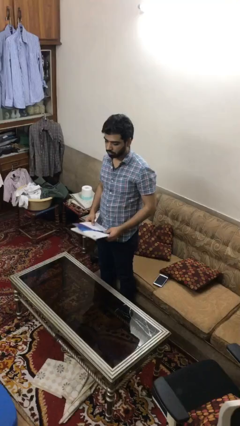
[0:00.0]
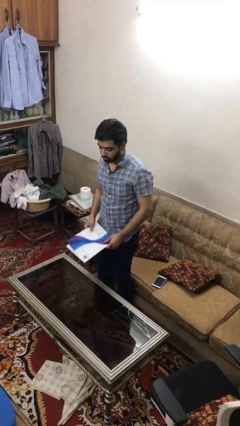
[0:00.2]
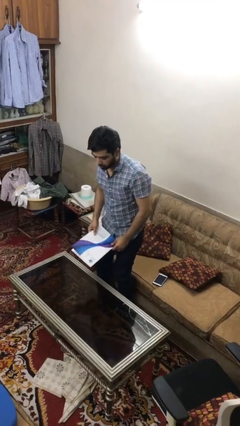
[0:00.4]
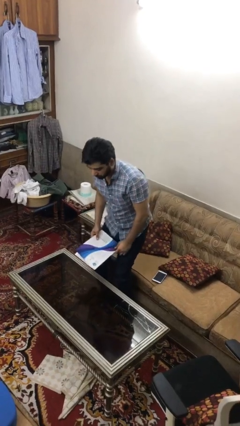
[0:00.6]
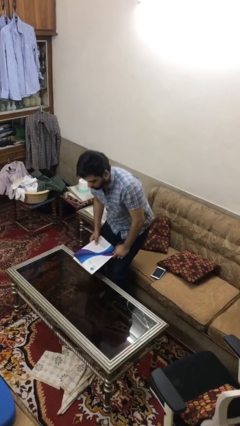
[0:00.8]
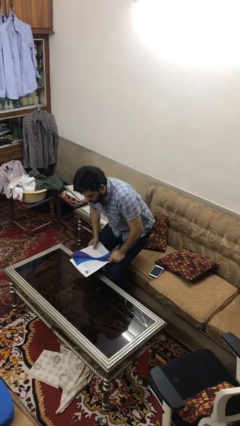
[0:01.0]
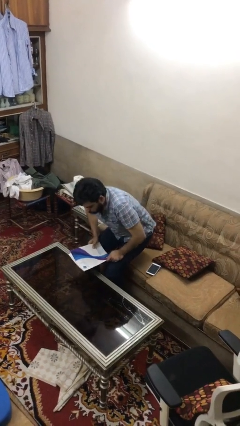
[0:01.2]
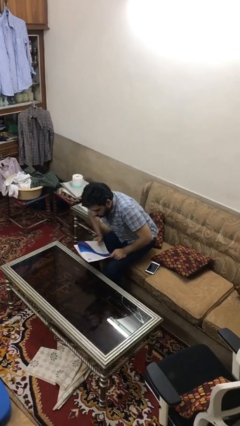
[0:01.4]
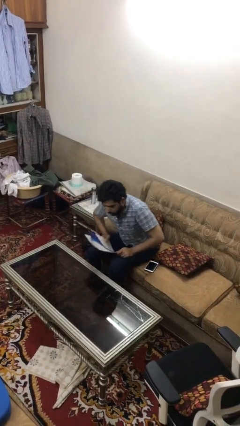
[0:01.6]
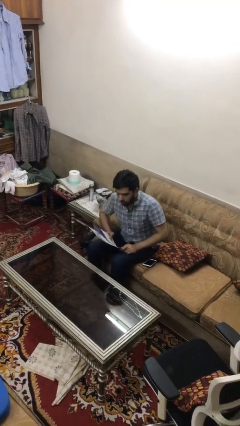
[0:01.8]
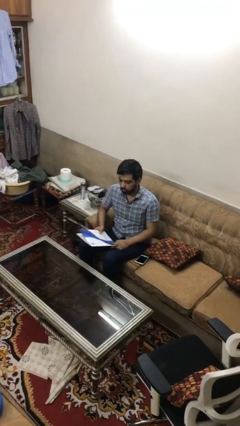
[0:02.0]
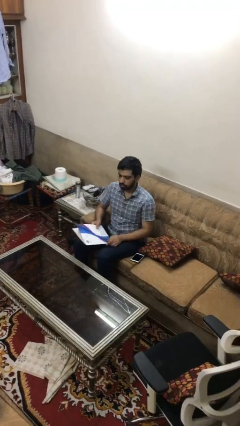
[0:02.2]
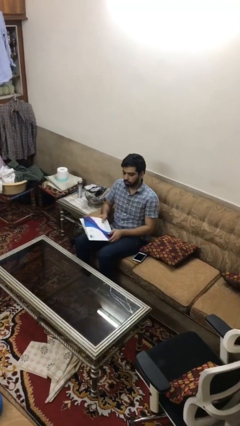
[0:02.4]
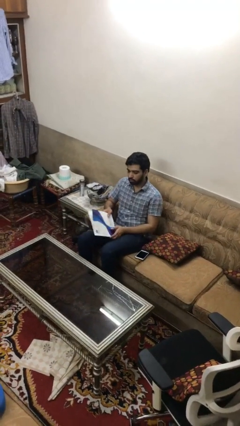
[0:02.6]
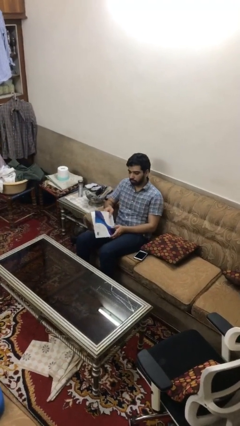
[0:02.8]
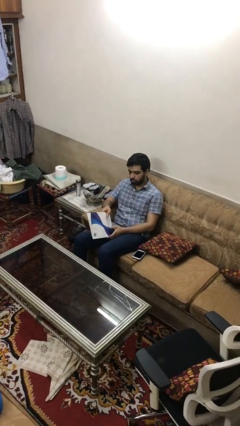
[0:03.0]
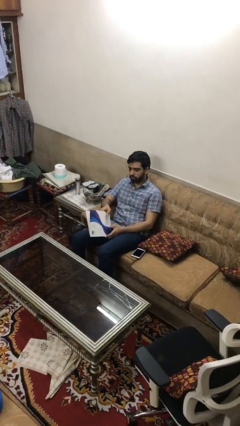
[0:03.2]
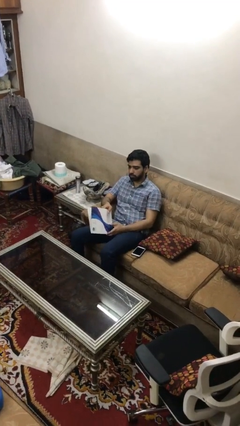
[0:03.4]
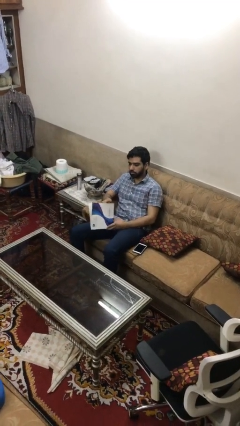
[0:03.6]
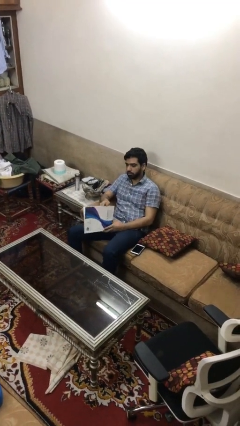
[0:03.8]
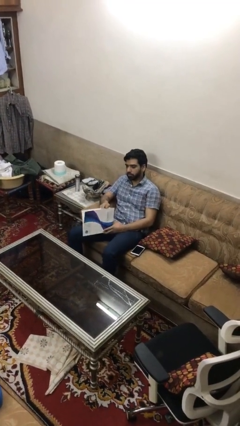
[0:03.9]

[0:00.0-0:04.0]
person sits down

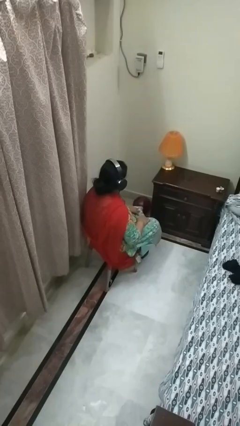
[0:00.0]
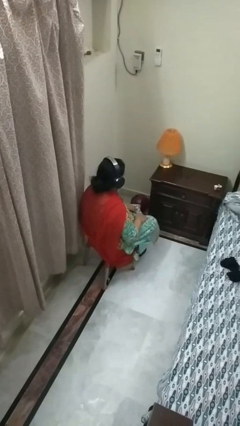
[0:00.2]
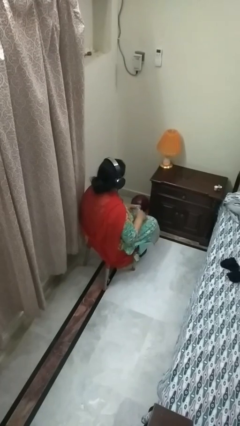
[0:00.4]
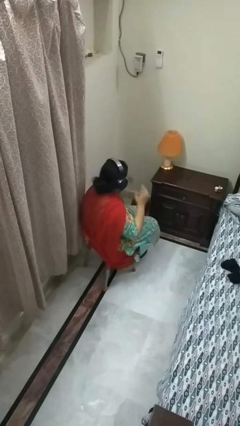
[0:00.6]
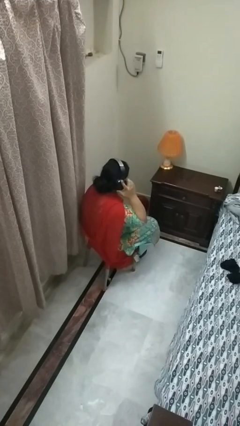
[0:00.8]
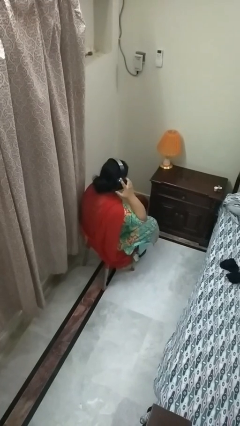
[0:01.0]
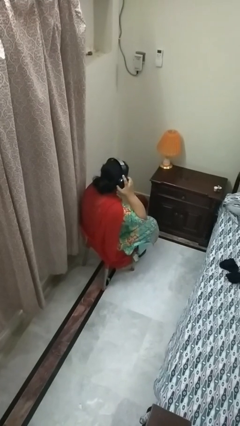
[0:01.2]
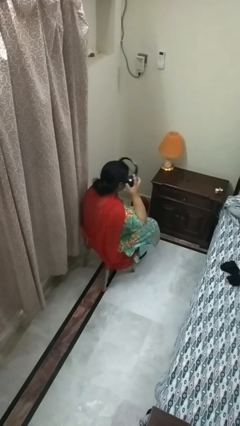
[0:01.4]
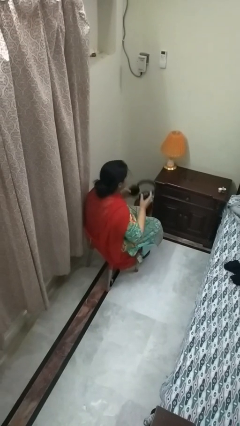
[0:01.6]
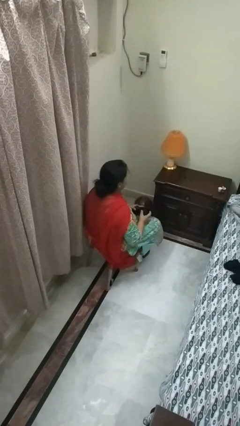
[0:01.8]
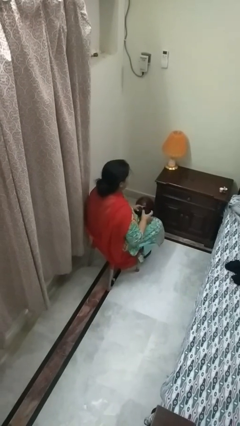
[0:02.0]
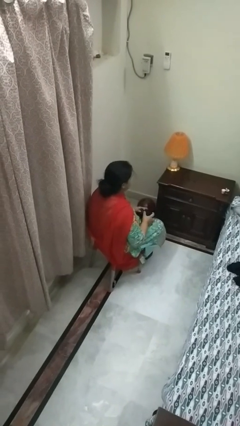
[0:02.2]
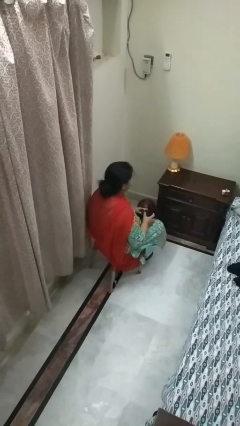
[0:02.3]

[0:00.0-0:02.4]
person takes off headphones

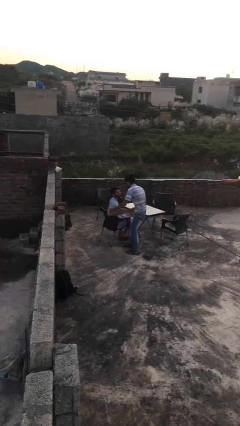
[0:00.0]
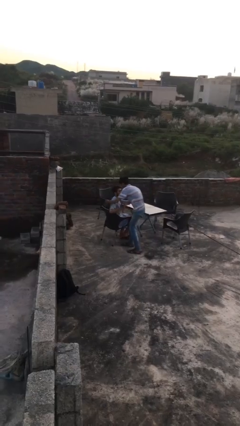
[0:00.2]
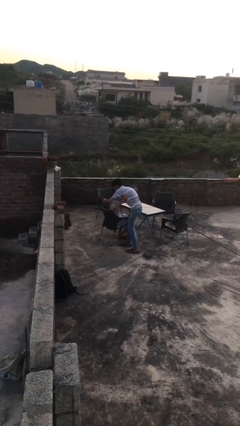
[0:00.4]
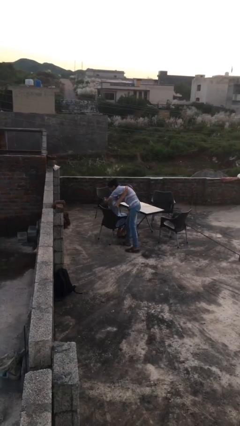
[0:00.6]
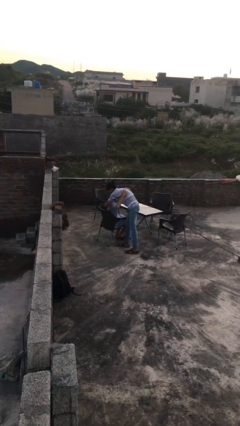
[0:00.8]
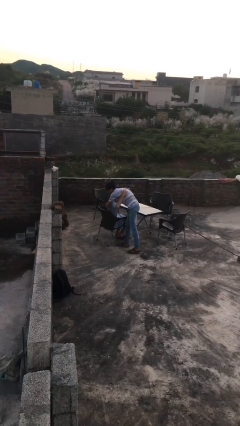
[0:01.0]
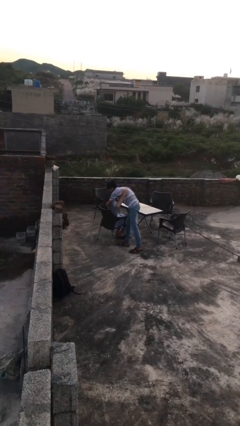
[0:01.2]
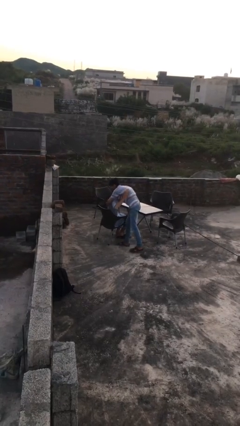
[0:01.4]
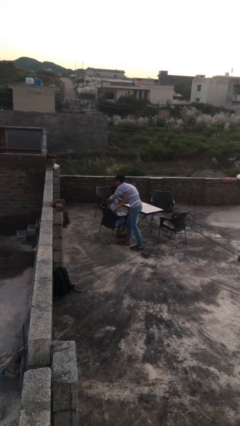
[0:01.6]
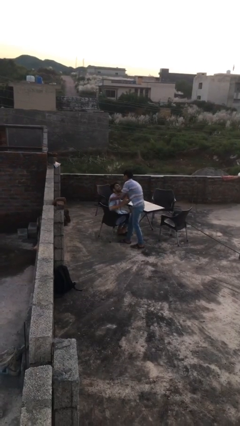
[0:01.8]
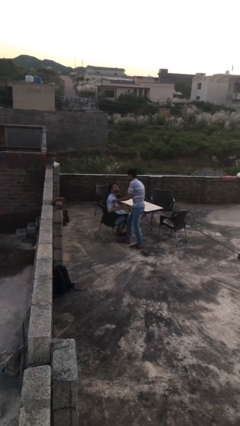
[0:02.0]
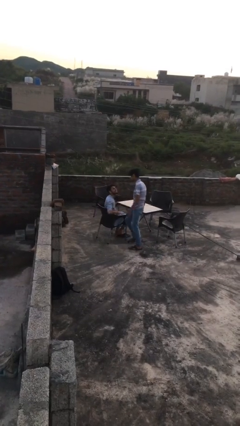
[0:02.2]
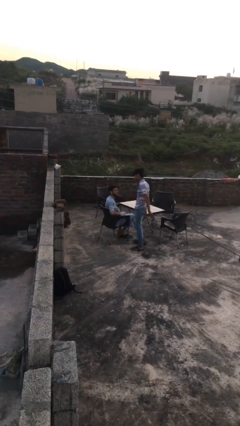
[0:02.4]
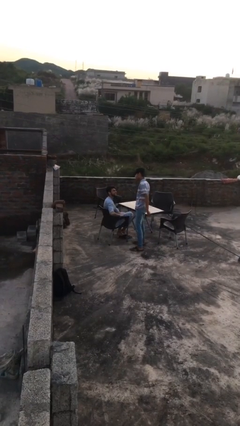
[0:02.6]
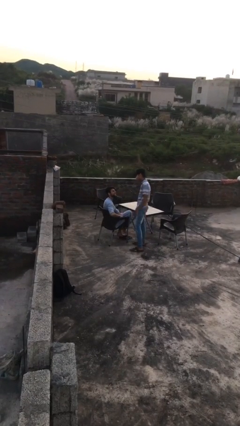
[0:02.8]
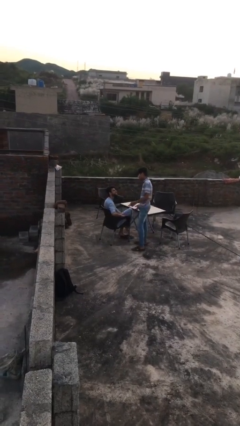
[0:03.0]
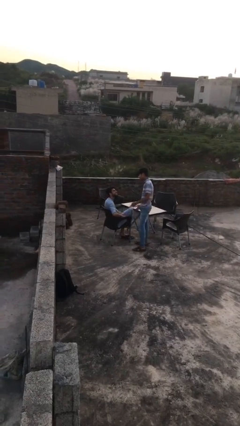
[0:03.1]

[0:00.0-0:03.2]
person embraces person

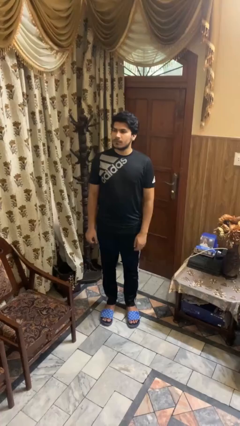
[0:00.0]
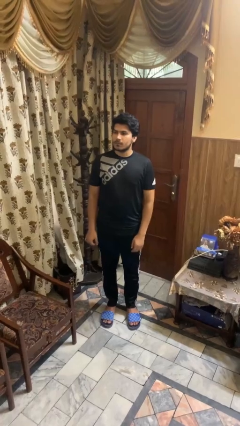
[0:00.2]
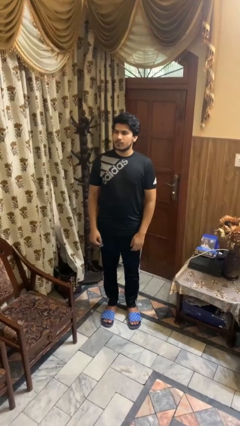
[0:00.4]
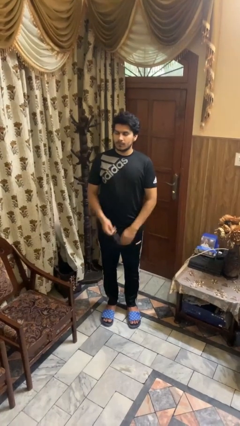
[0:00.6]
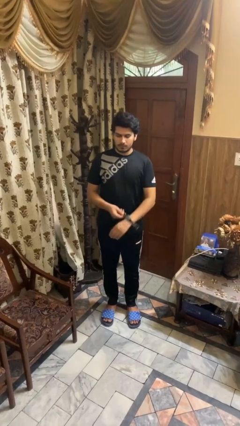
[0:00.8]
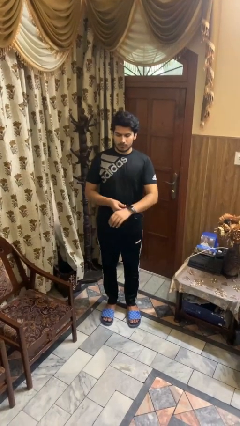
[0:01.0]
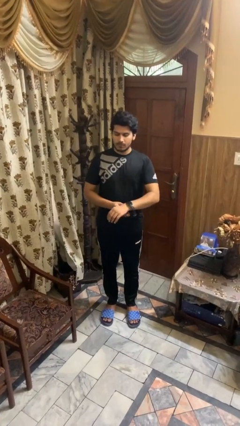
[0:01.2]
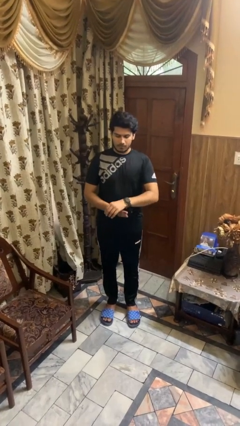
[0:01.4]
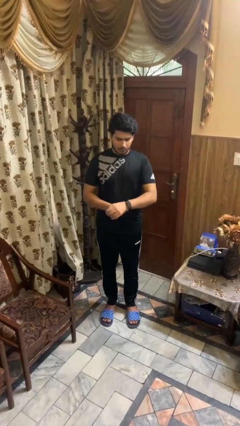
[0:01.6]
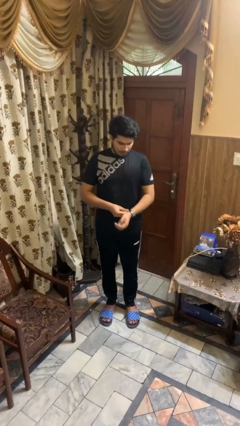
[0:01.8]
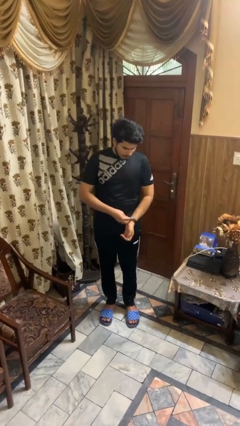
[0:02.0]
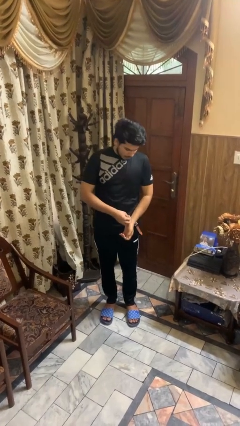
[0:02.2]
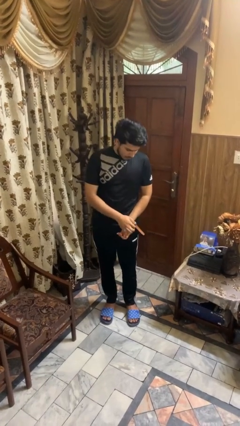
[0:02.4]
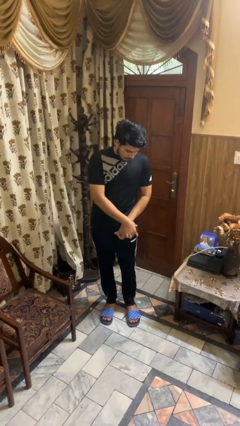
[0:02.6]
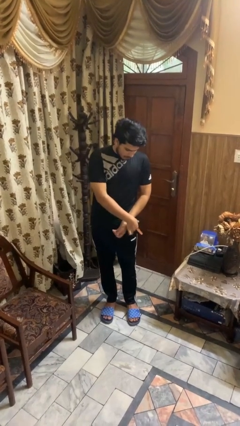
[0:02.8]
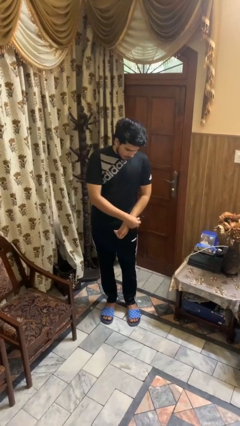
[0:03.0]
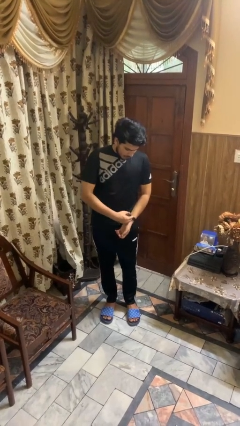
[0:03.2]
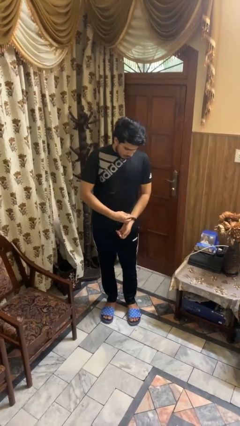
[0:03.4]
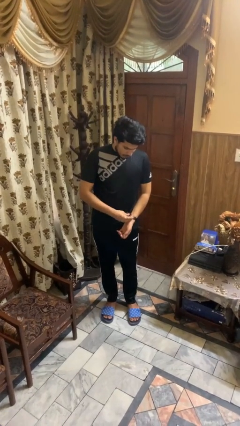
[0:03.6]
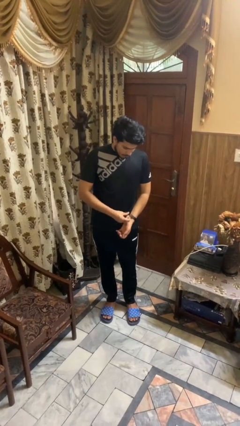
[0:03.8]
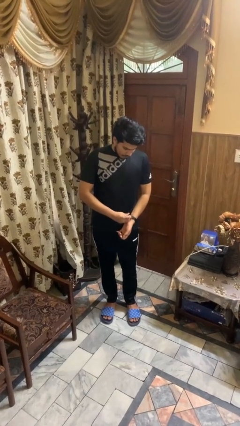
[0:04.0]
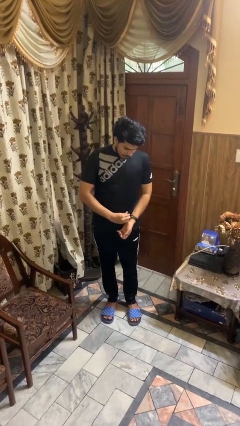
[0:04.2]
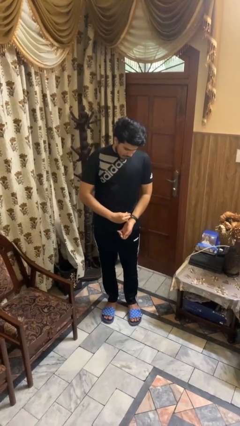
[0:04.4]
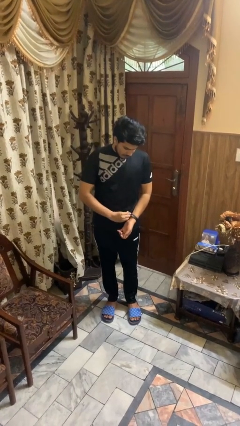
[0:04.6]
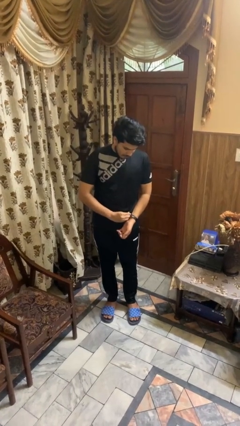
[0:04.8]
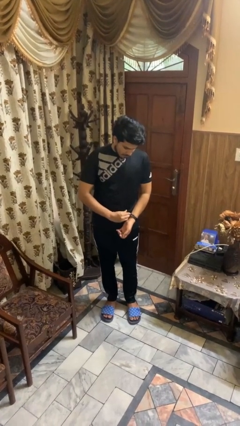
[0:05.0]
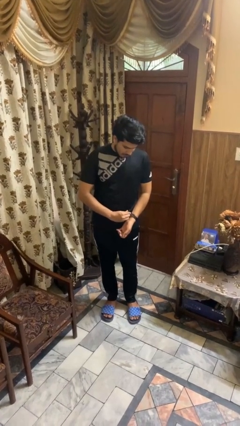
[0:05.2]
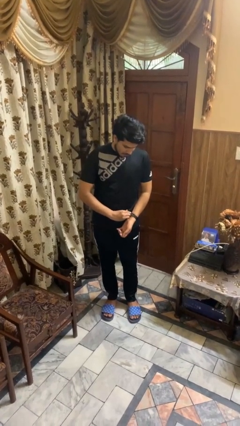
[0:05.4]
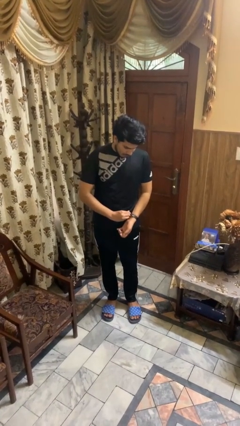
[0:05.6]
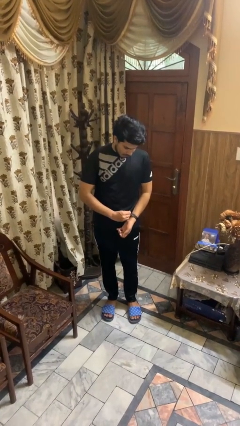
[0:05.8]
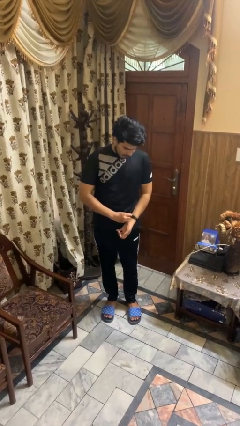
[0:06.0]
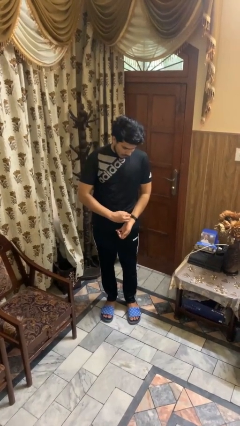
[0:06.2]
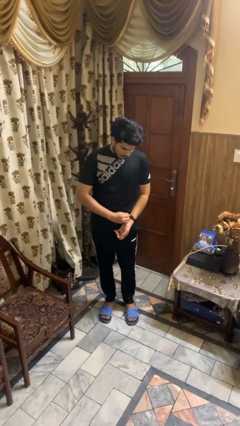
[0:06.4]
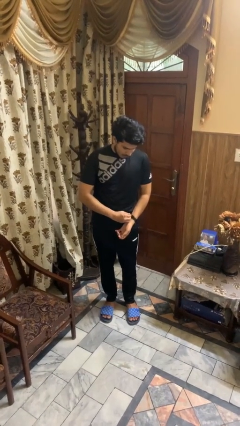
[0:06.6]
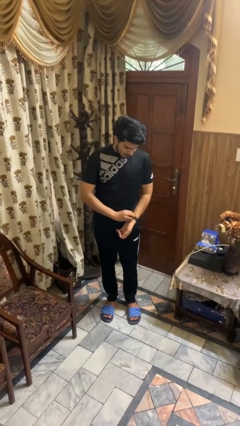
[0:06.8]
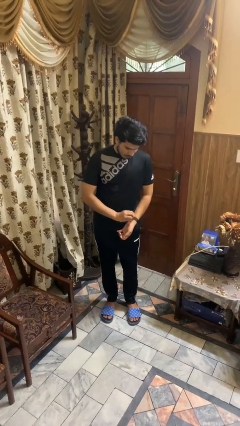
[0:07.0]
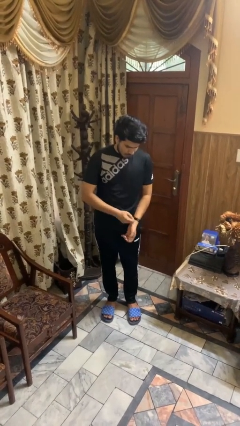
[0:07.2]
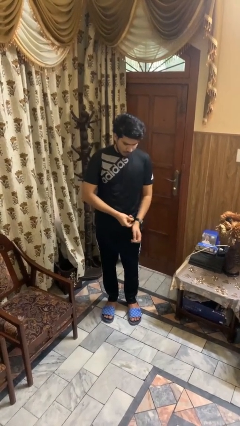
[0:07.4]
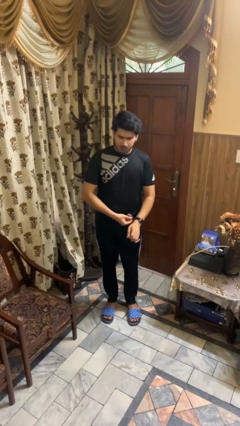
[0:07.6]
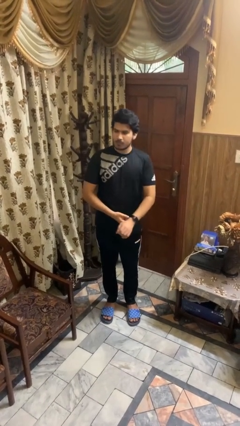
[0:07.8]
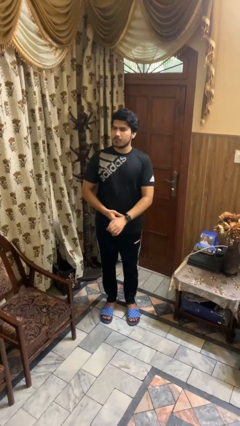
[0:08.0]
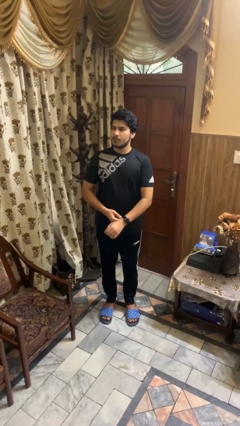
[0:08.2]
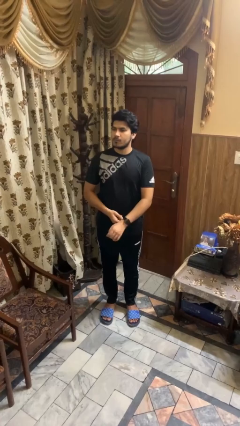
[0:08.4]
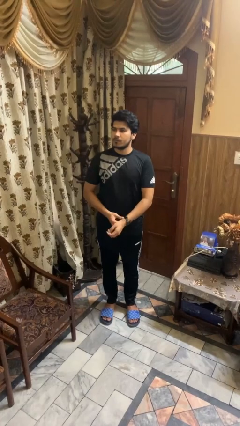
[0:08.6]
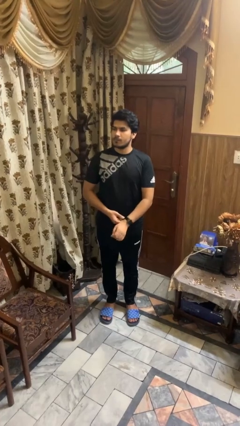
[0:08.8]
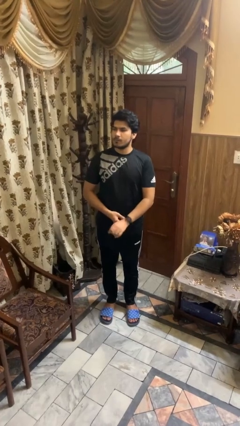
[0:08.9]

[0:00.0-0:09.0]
person puts on wristwatch
